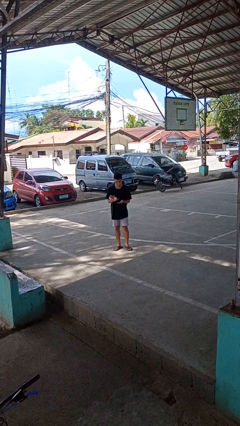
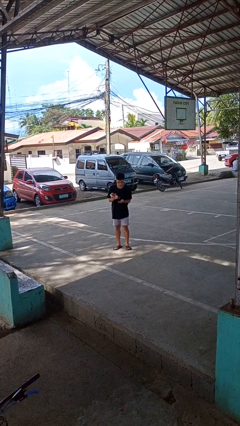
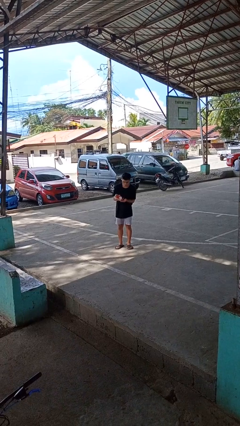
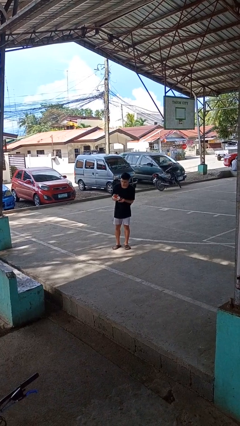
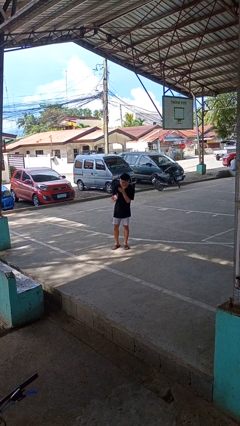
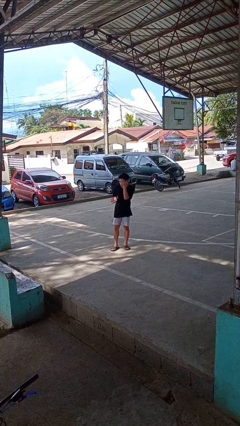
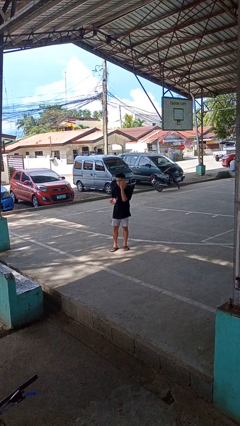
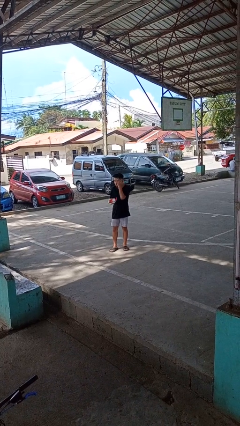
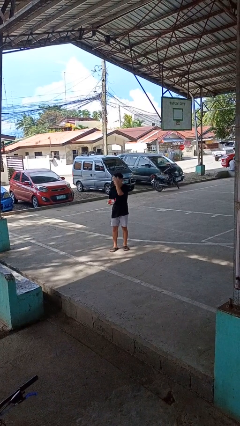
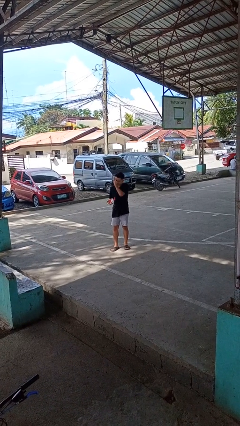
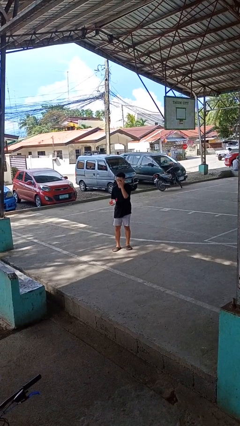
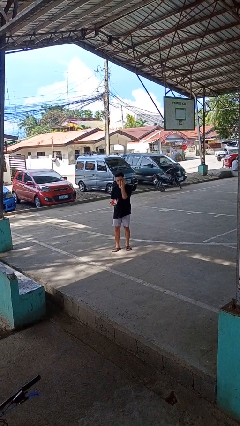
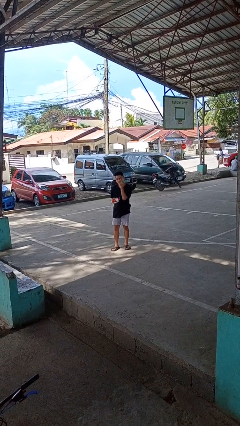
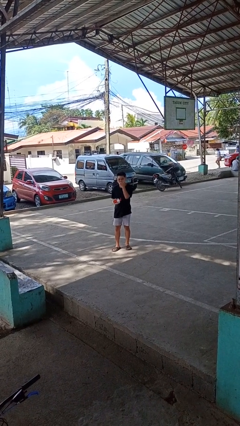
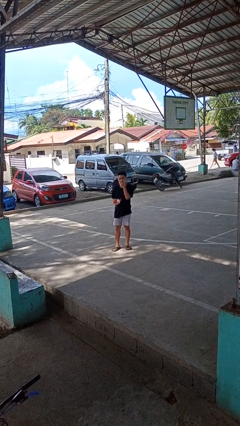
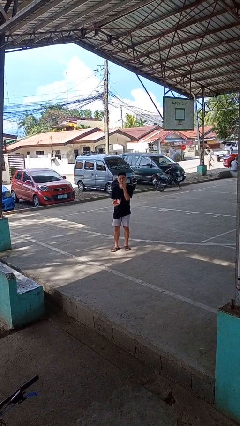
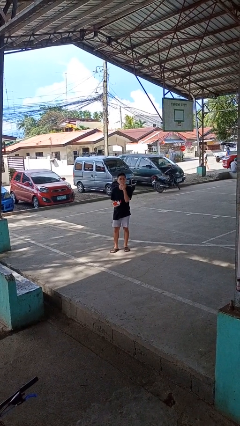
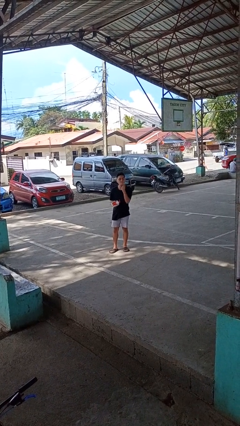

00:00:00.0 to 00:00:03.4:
person applies facial moisturizer

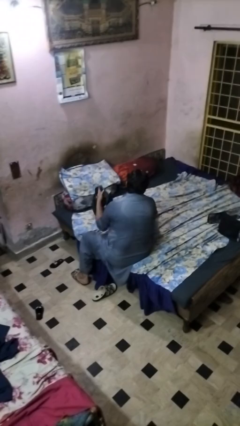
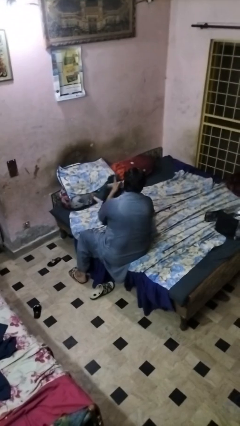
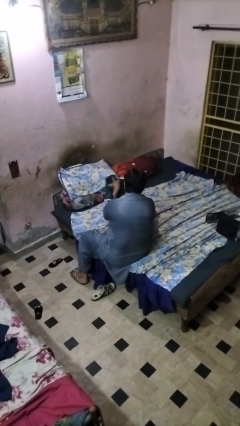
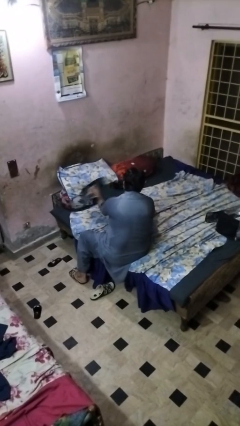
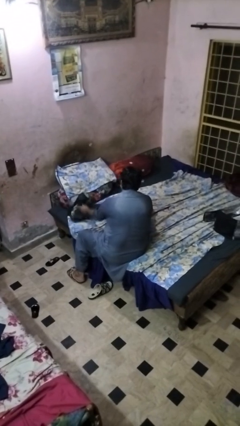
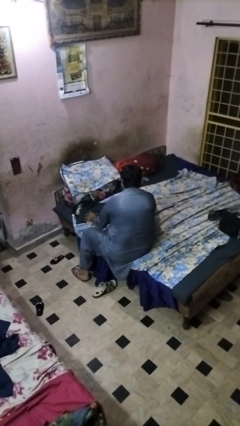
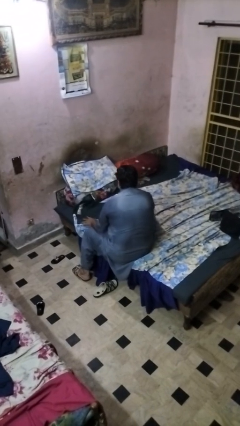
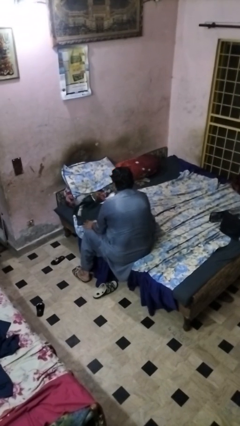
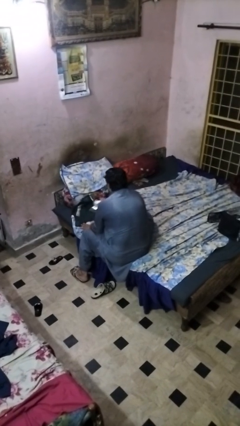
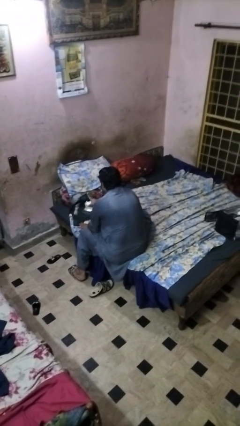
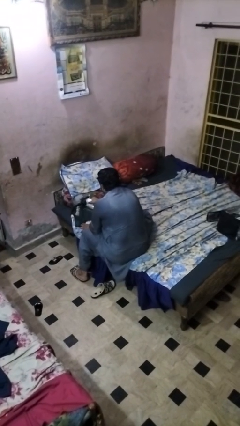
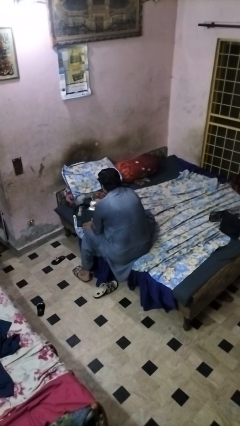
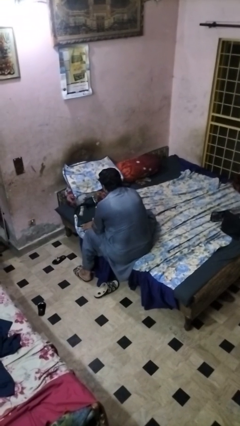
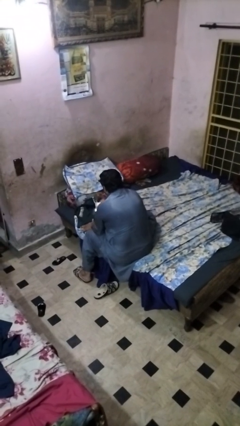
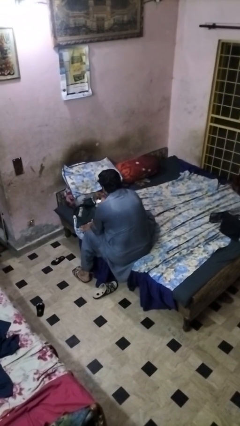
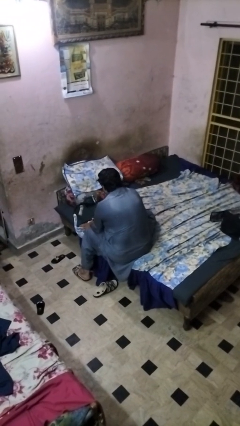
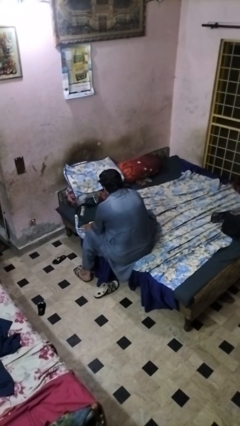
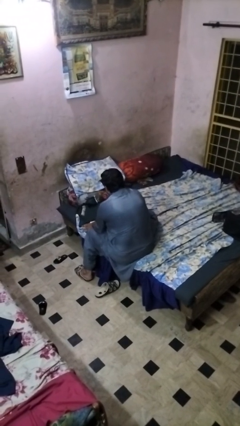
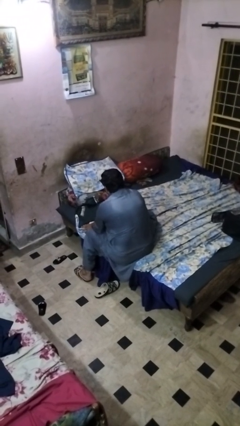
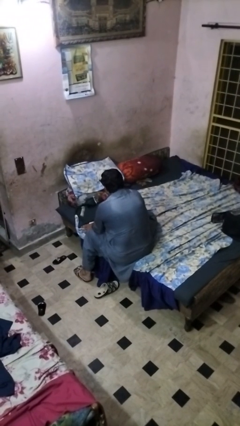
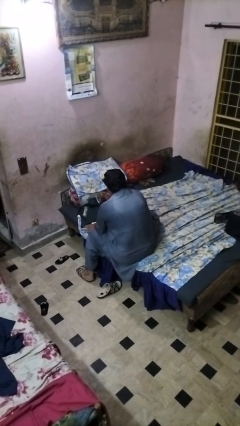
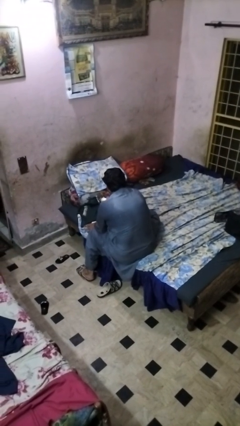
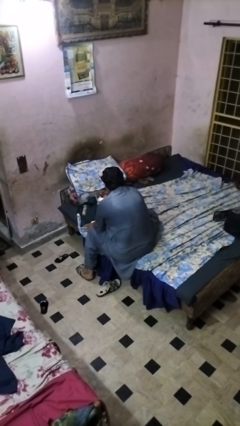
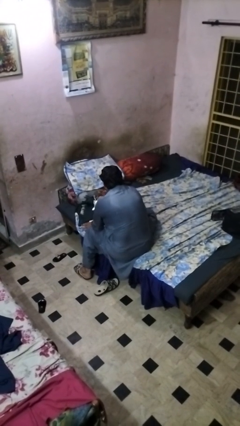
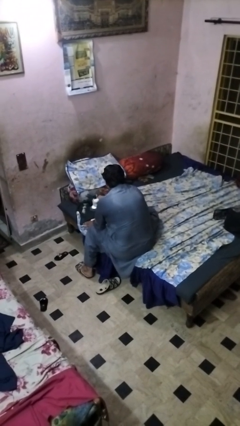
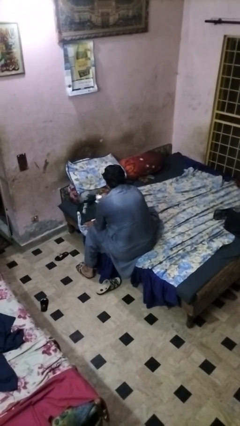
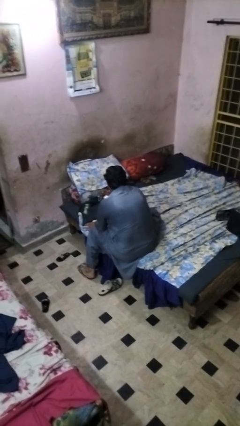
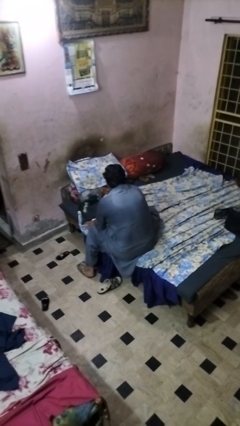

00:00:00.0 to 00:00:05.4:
person irons clothes

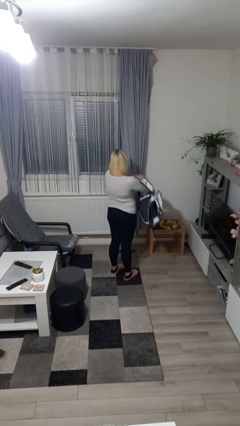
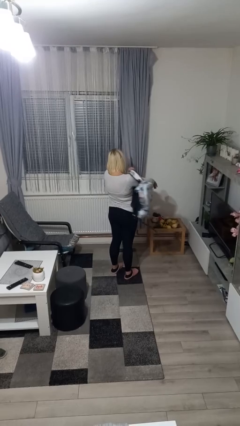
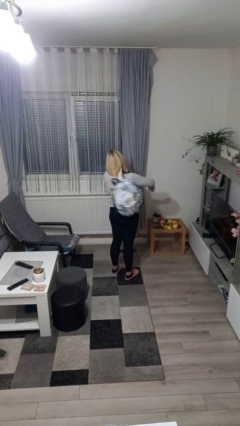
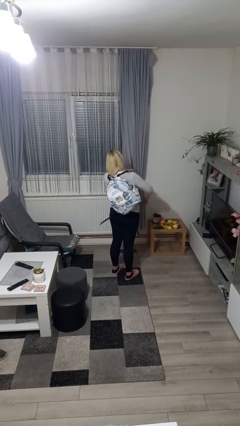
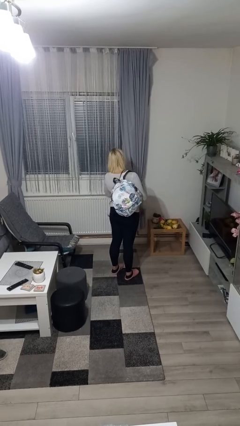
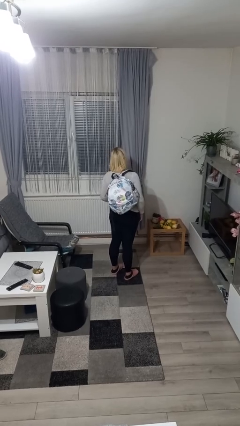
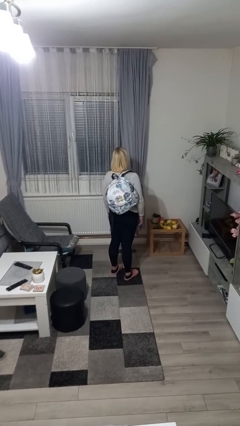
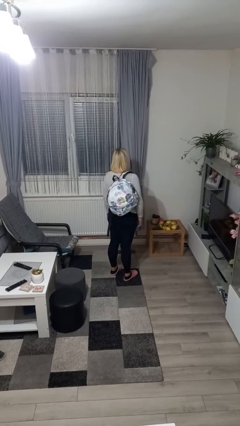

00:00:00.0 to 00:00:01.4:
person puts on backpack

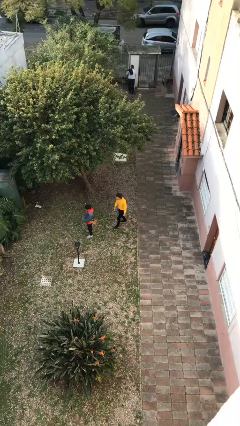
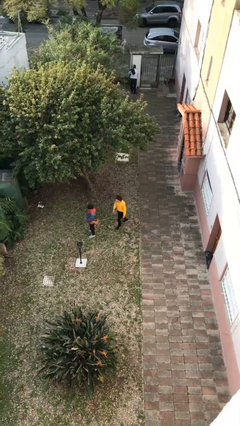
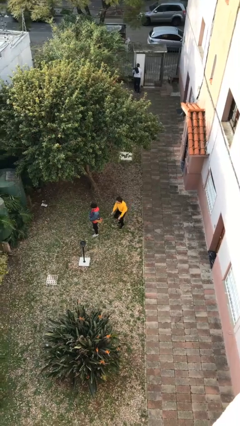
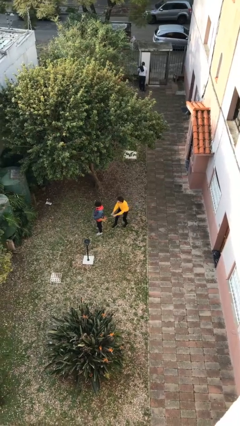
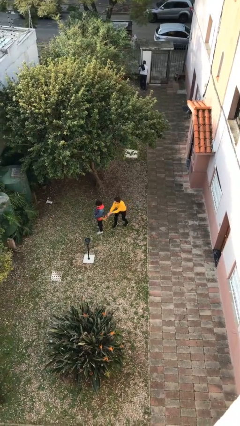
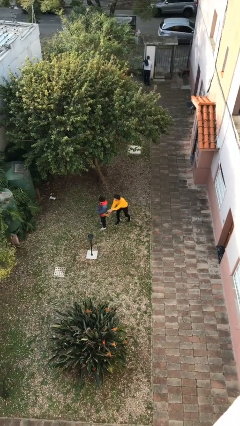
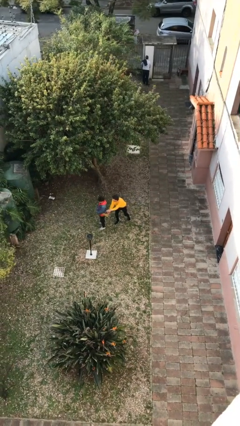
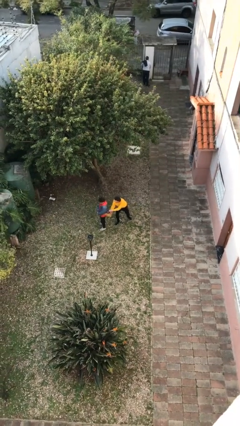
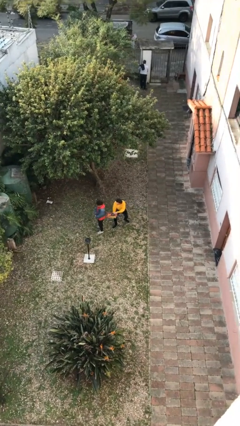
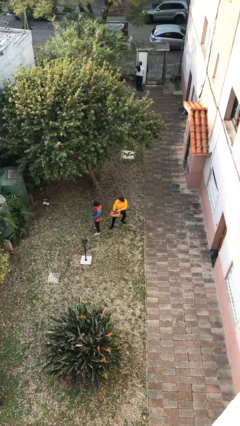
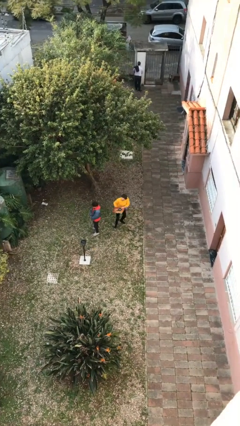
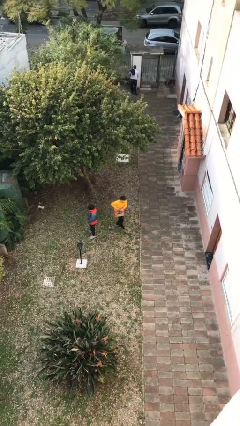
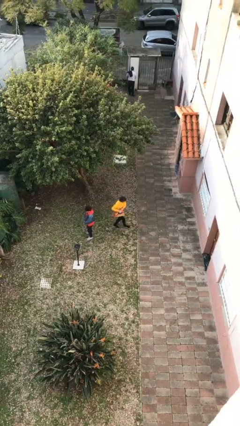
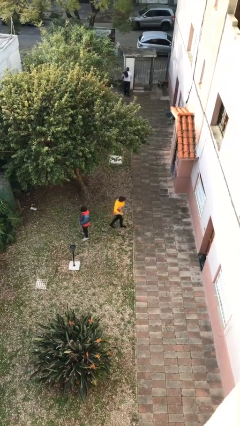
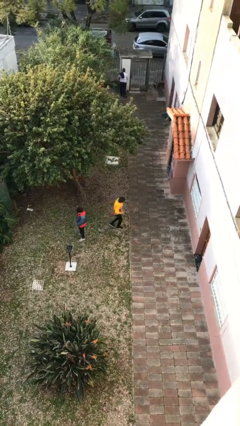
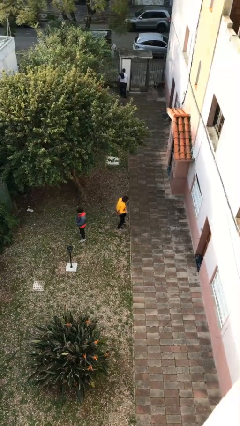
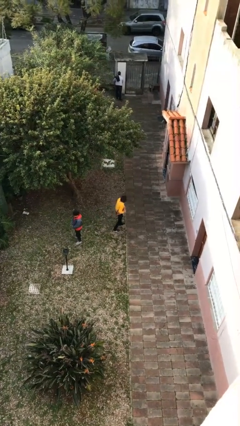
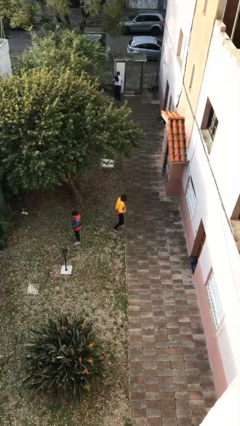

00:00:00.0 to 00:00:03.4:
person steals object from person

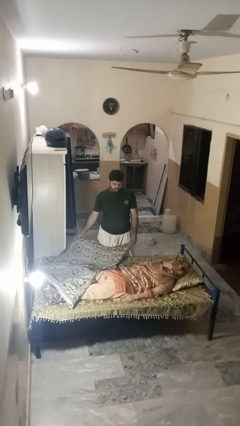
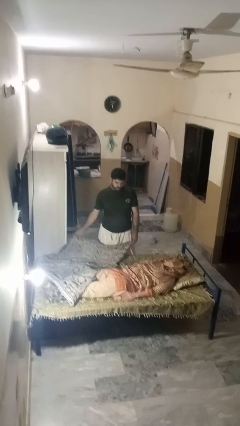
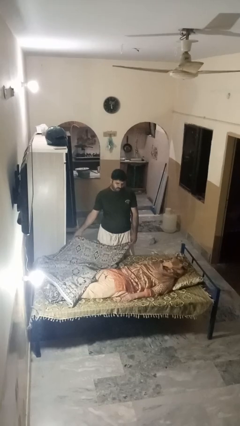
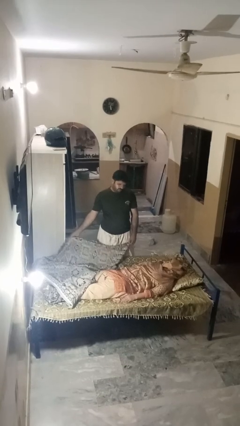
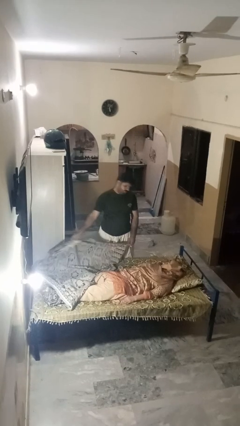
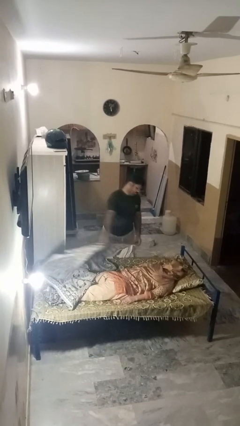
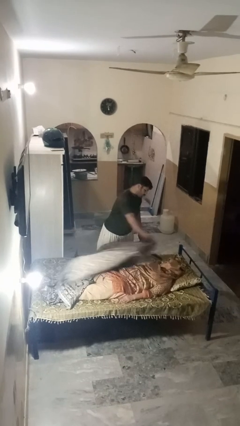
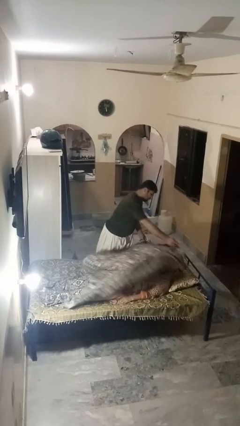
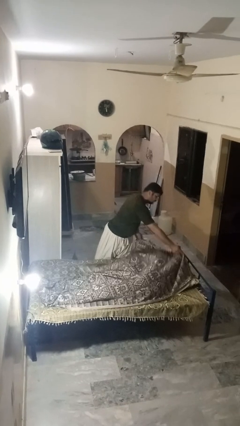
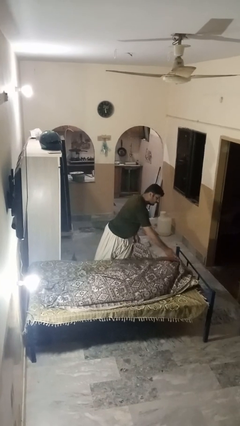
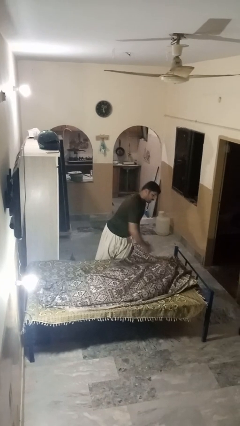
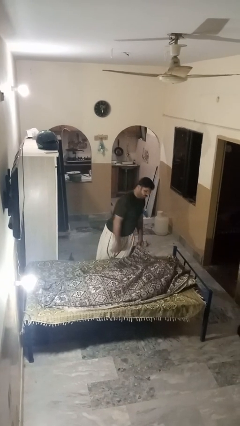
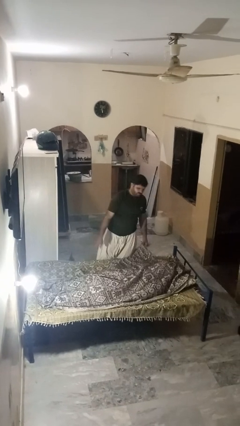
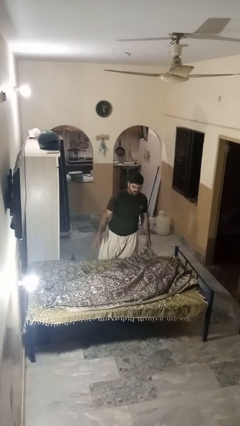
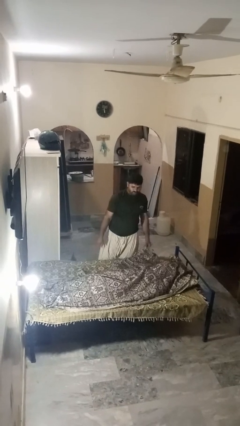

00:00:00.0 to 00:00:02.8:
person covers friend with blanket

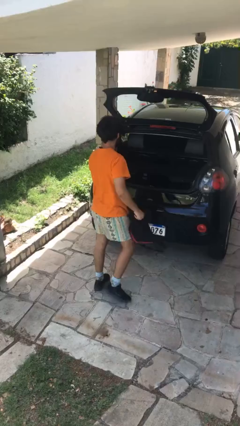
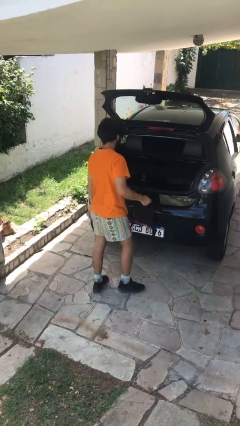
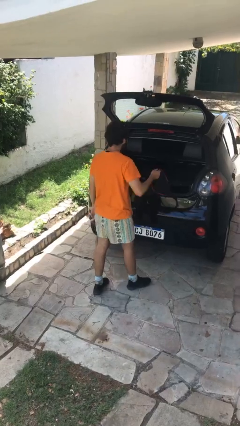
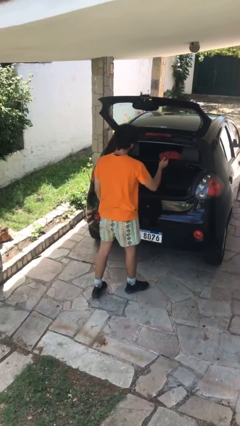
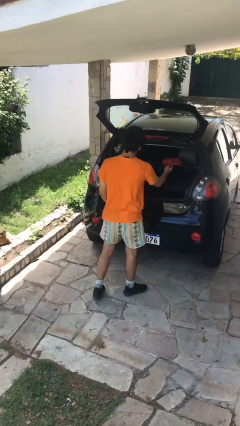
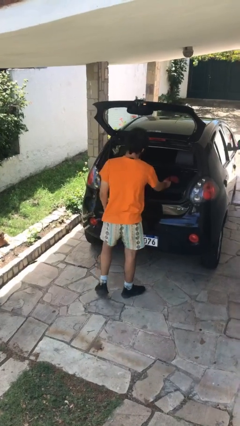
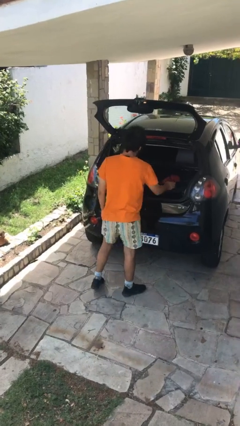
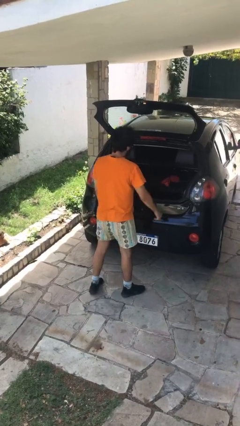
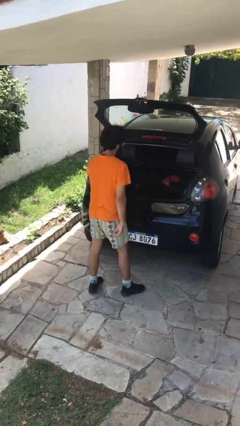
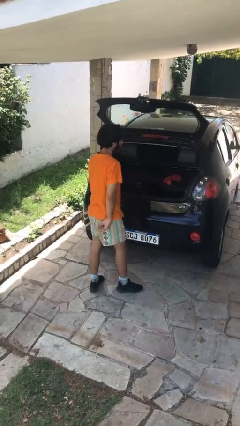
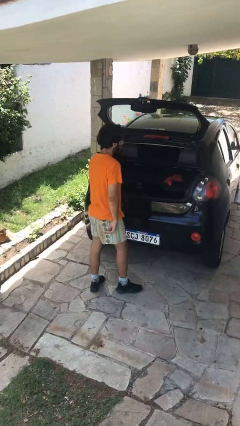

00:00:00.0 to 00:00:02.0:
person loads car
